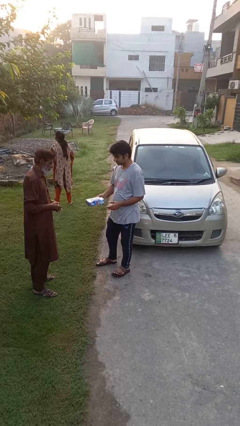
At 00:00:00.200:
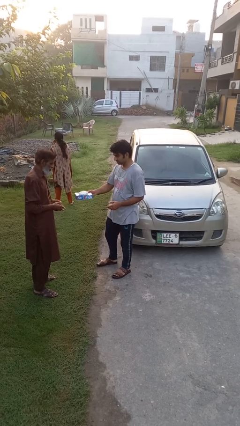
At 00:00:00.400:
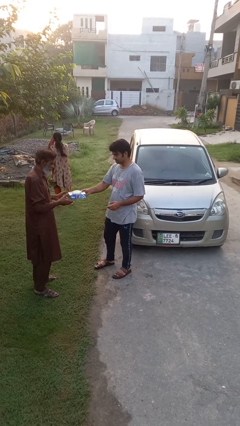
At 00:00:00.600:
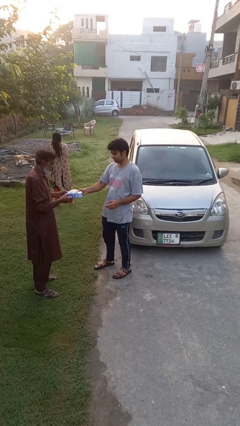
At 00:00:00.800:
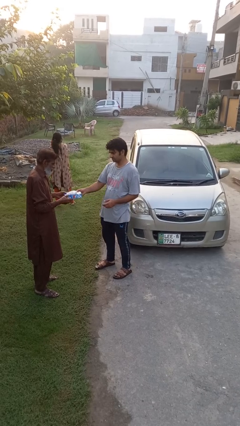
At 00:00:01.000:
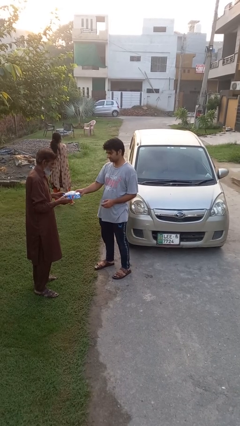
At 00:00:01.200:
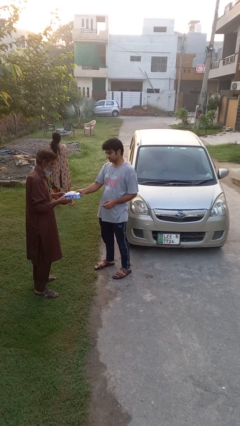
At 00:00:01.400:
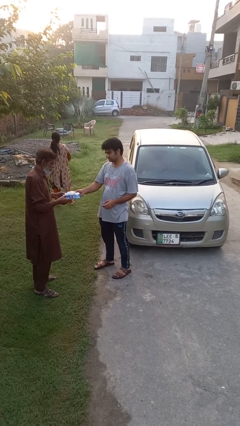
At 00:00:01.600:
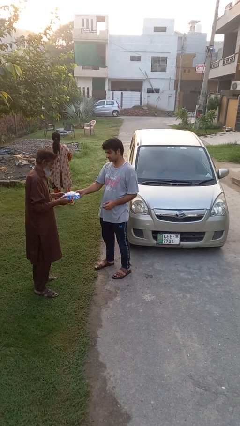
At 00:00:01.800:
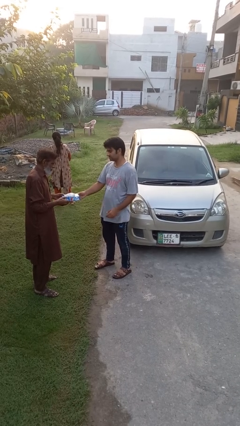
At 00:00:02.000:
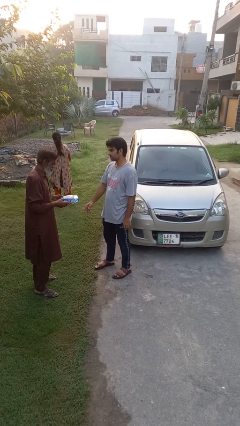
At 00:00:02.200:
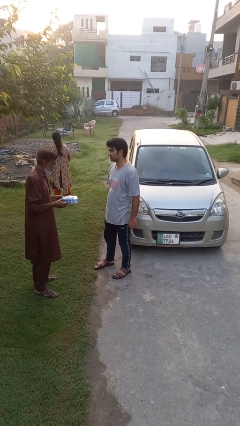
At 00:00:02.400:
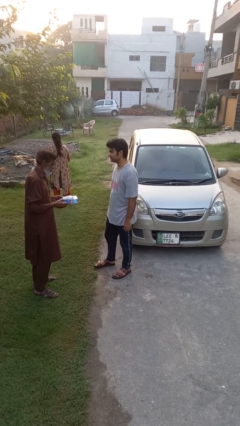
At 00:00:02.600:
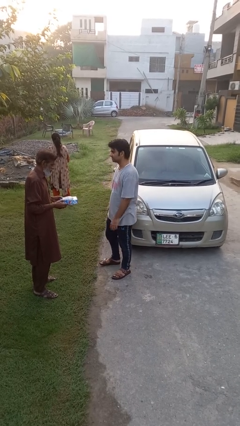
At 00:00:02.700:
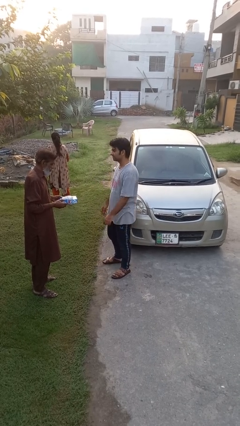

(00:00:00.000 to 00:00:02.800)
person transfers object to person

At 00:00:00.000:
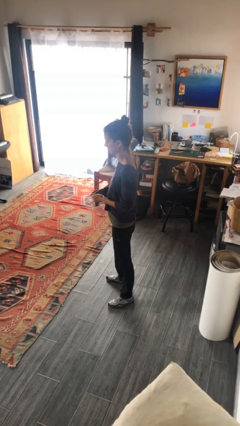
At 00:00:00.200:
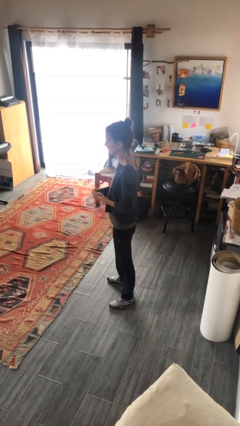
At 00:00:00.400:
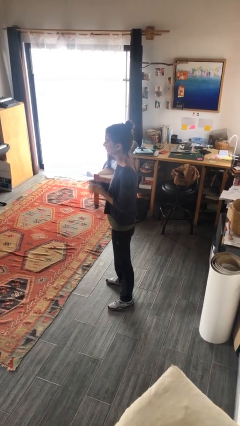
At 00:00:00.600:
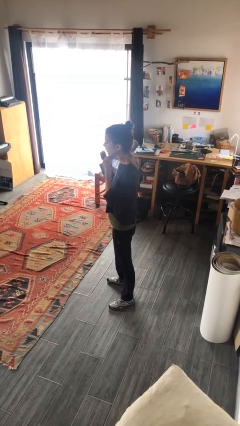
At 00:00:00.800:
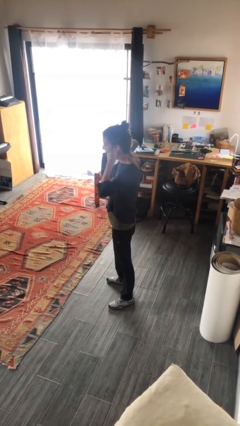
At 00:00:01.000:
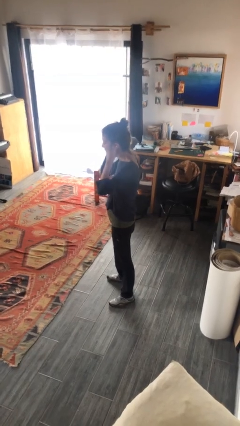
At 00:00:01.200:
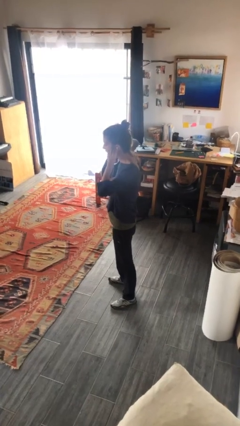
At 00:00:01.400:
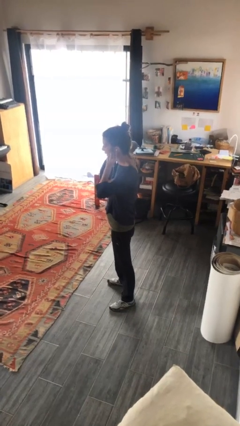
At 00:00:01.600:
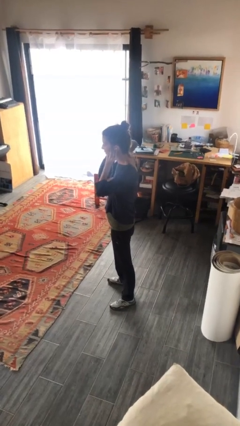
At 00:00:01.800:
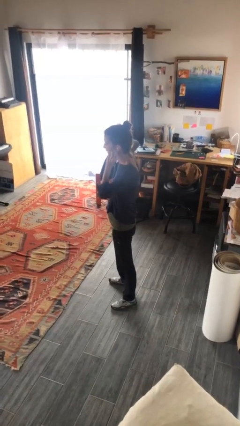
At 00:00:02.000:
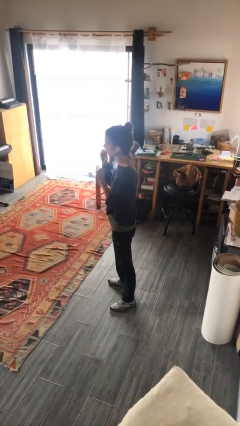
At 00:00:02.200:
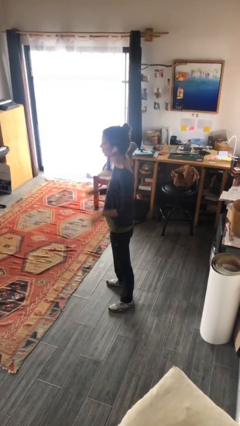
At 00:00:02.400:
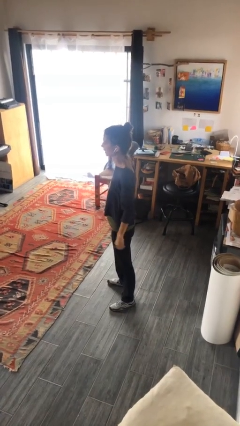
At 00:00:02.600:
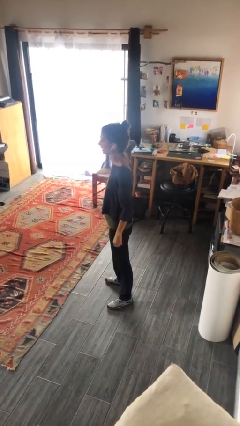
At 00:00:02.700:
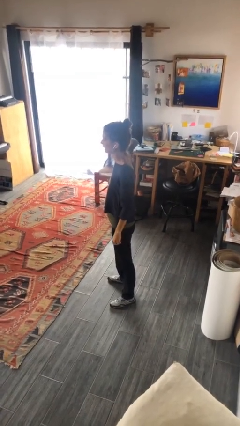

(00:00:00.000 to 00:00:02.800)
person puts on headphones

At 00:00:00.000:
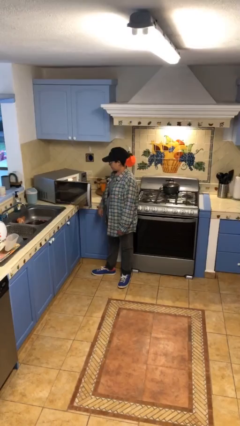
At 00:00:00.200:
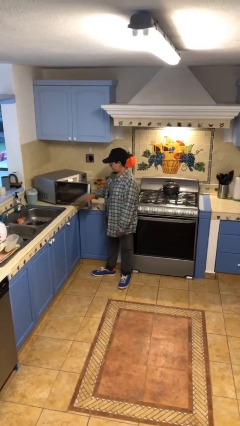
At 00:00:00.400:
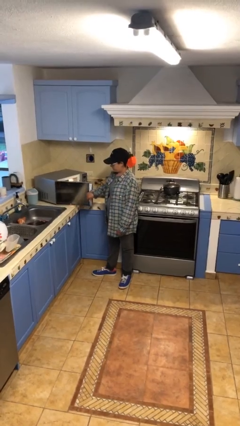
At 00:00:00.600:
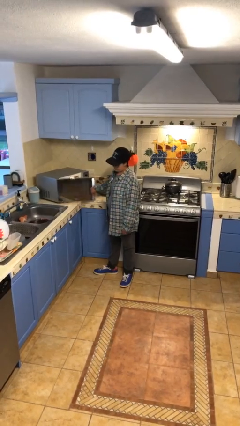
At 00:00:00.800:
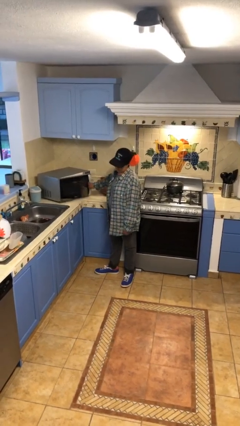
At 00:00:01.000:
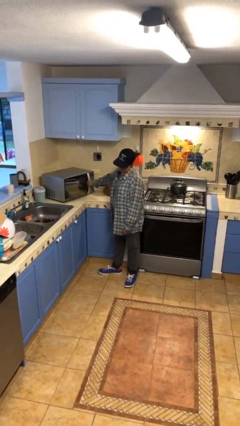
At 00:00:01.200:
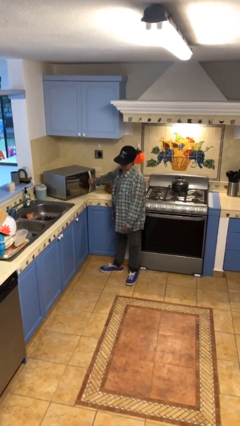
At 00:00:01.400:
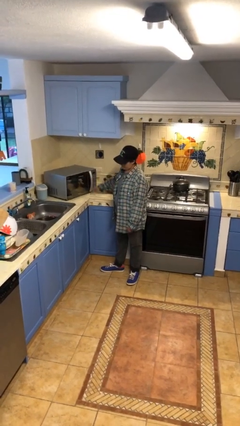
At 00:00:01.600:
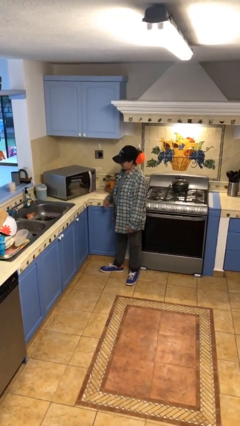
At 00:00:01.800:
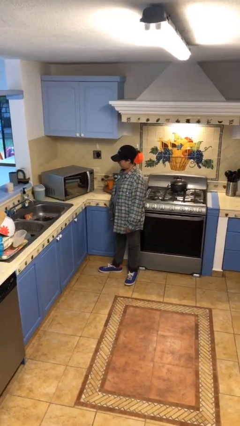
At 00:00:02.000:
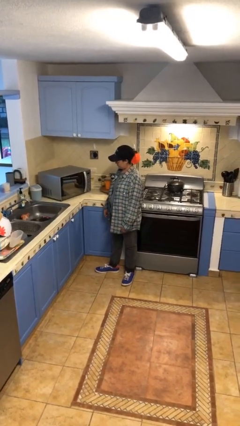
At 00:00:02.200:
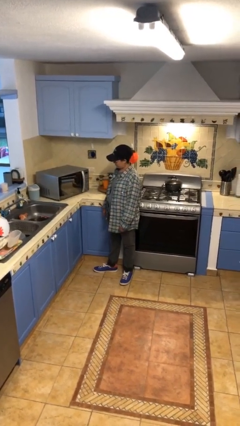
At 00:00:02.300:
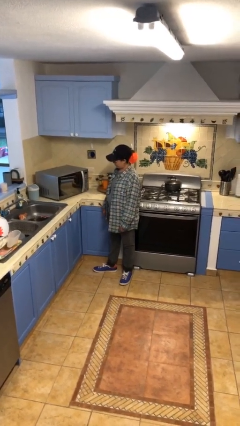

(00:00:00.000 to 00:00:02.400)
person closes microwave

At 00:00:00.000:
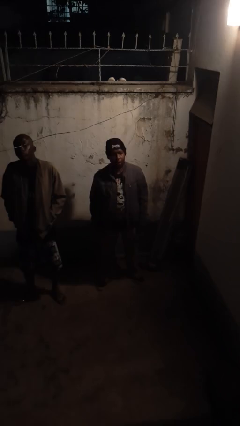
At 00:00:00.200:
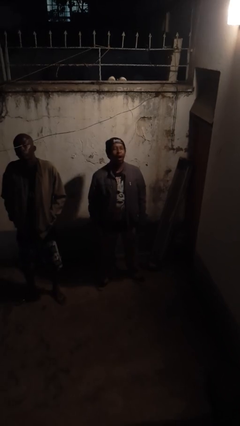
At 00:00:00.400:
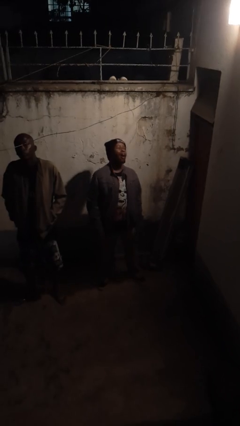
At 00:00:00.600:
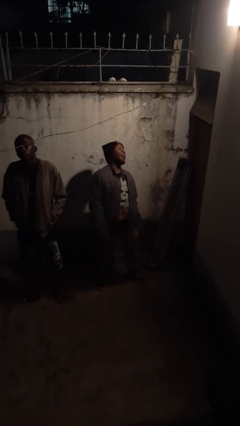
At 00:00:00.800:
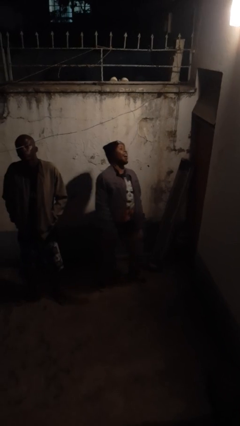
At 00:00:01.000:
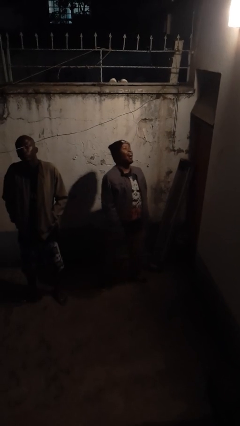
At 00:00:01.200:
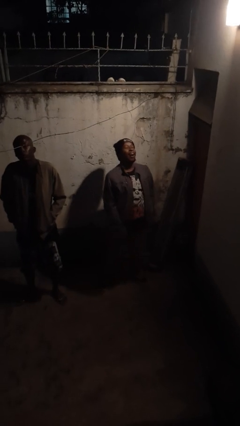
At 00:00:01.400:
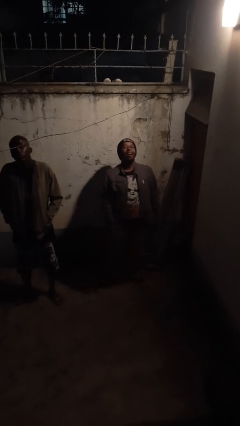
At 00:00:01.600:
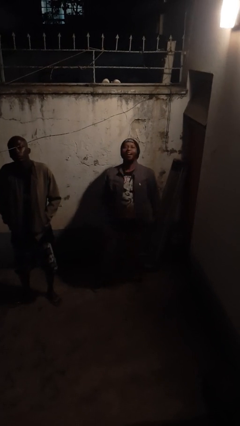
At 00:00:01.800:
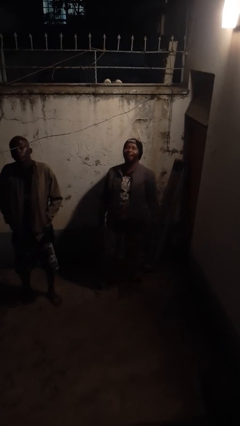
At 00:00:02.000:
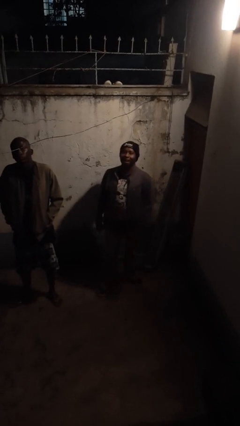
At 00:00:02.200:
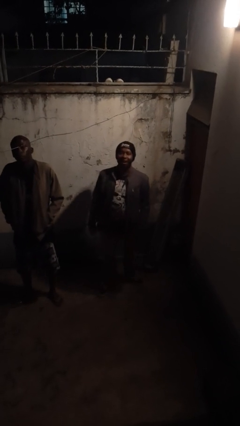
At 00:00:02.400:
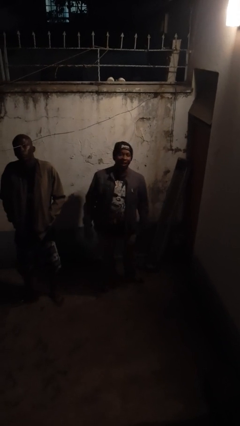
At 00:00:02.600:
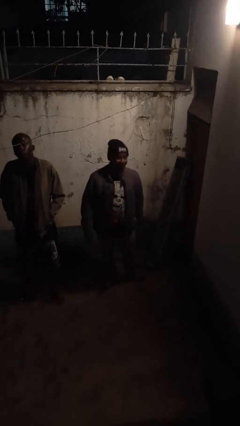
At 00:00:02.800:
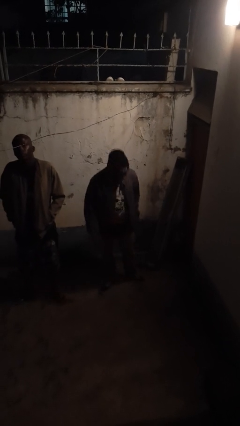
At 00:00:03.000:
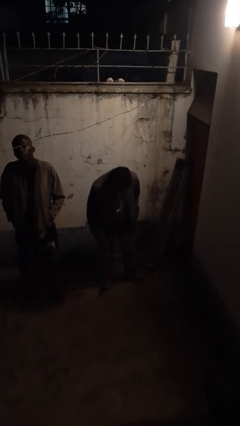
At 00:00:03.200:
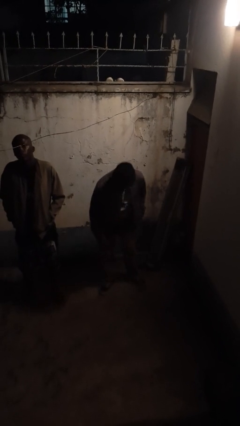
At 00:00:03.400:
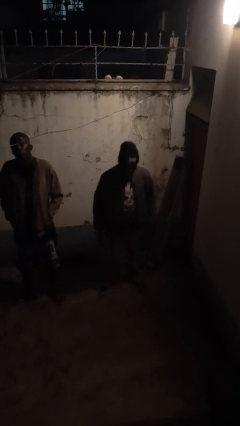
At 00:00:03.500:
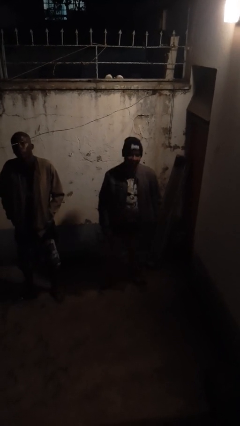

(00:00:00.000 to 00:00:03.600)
person laughs with person

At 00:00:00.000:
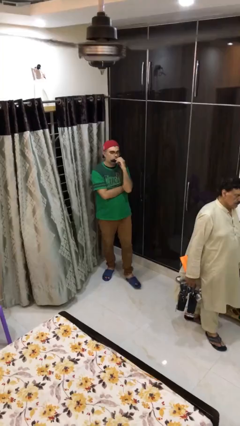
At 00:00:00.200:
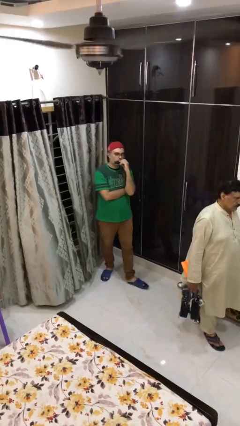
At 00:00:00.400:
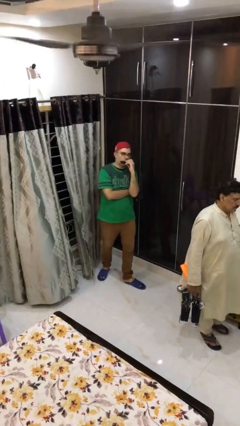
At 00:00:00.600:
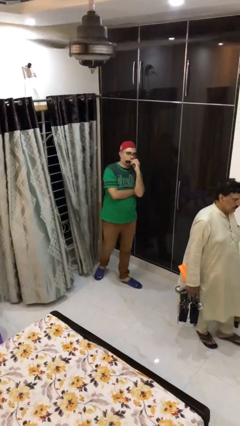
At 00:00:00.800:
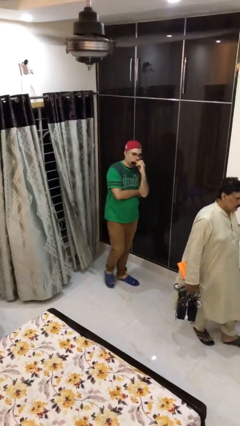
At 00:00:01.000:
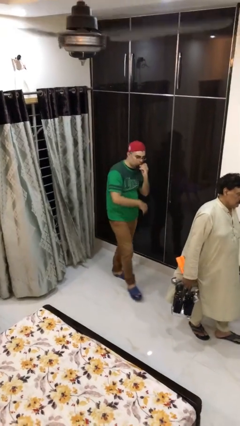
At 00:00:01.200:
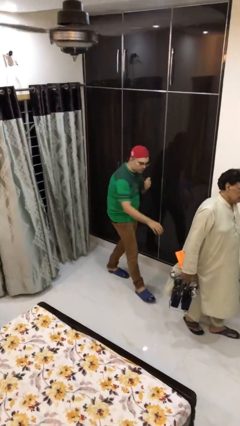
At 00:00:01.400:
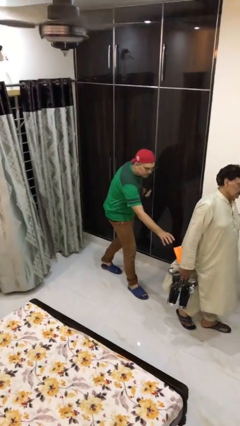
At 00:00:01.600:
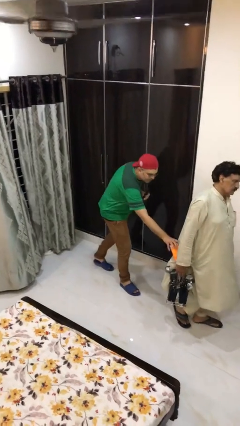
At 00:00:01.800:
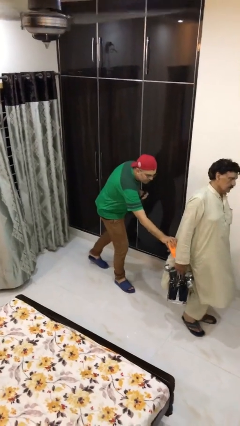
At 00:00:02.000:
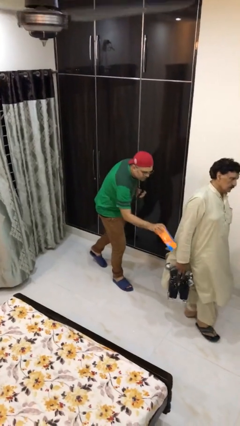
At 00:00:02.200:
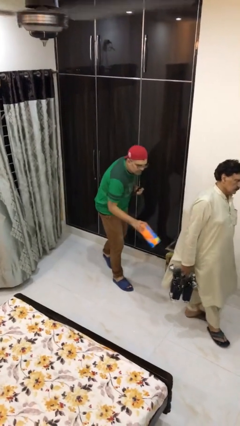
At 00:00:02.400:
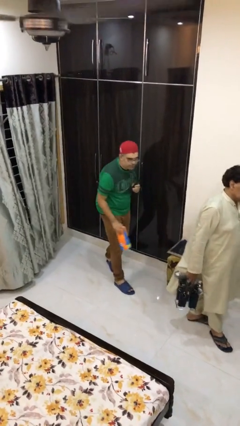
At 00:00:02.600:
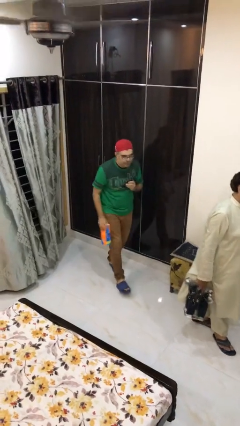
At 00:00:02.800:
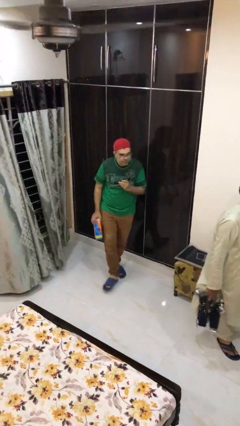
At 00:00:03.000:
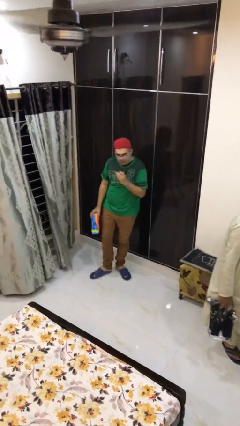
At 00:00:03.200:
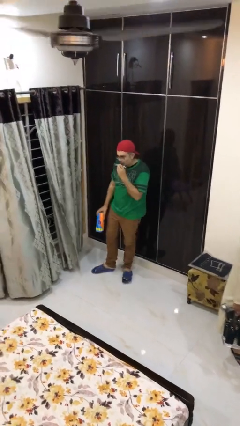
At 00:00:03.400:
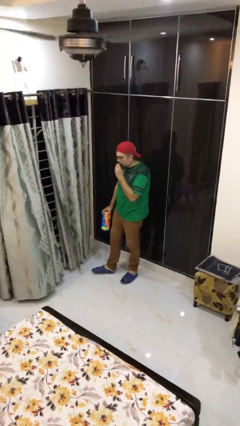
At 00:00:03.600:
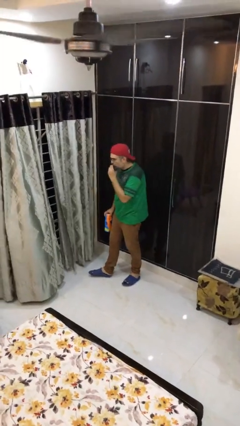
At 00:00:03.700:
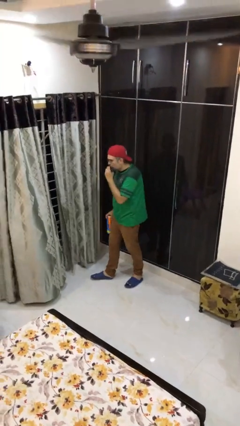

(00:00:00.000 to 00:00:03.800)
person steals object from person

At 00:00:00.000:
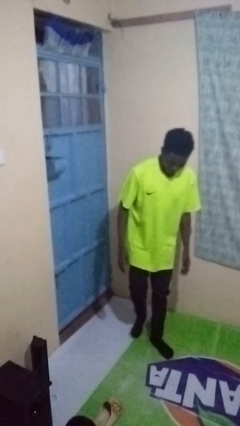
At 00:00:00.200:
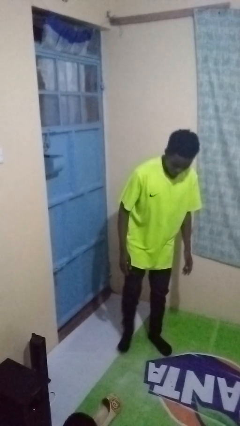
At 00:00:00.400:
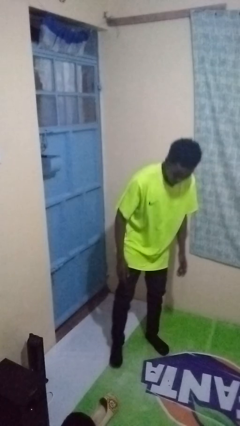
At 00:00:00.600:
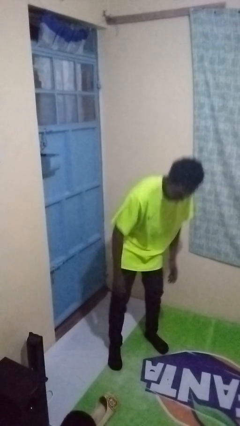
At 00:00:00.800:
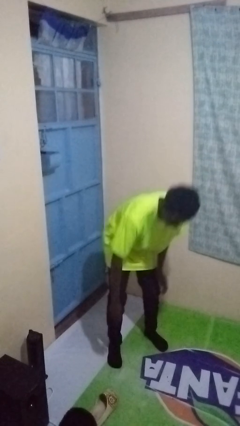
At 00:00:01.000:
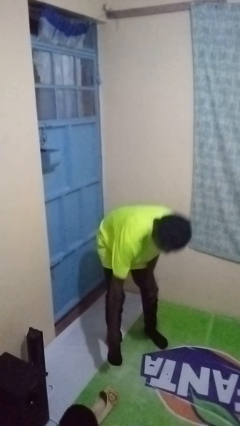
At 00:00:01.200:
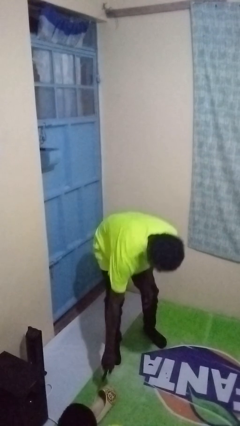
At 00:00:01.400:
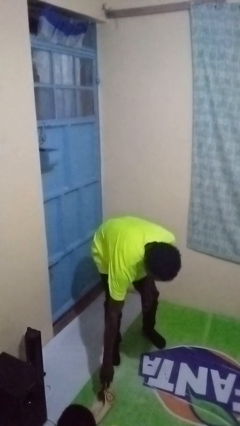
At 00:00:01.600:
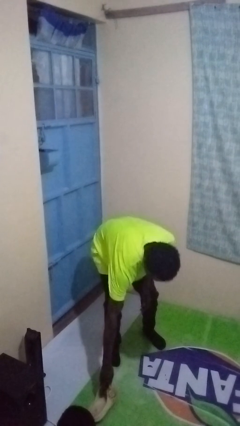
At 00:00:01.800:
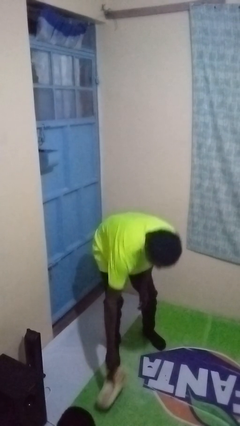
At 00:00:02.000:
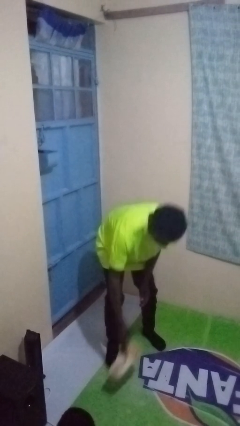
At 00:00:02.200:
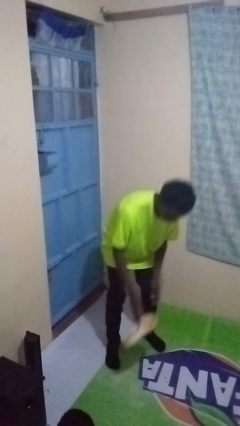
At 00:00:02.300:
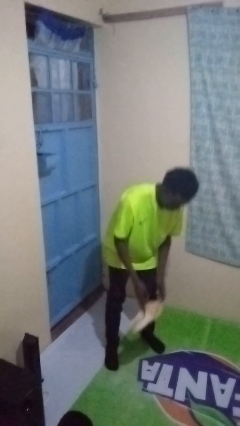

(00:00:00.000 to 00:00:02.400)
person picks up object from floor
